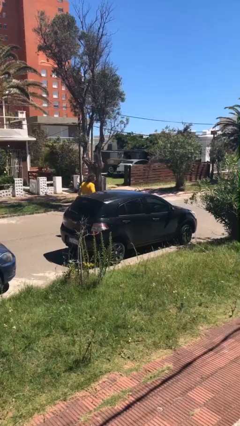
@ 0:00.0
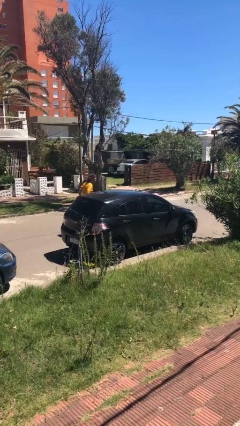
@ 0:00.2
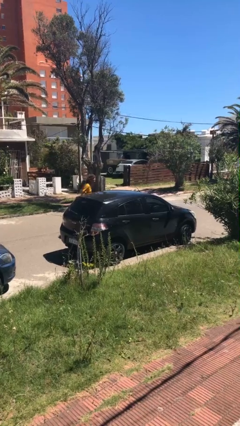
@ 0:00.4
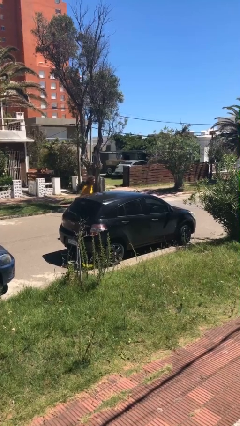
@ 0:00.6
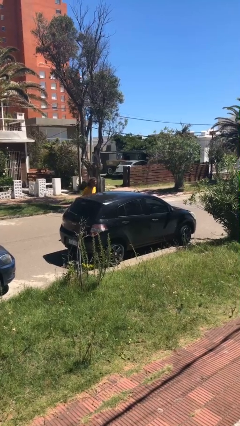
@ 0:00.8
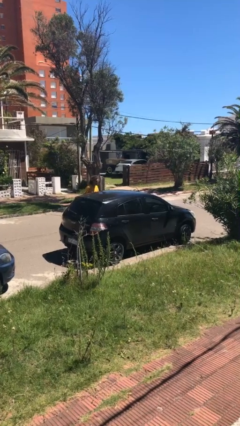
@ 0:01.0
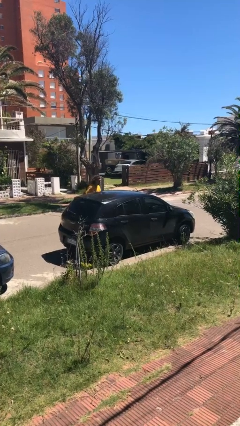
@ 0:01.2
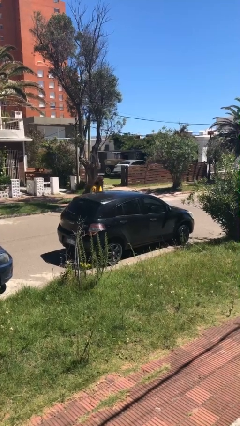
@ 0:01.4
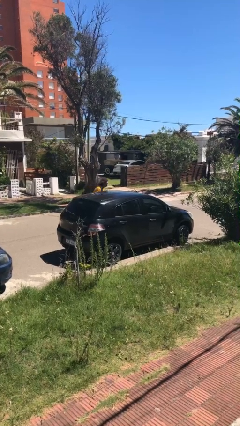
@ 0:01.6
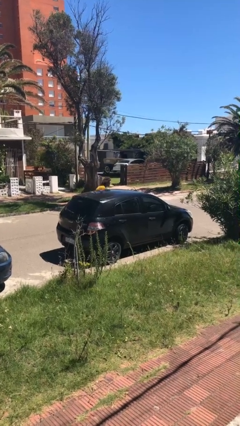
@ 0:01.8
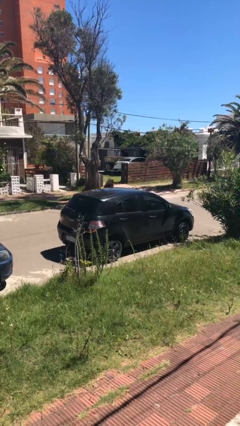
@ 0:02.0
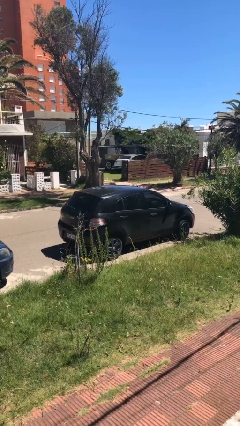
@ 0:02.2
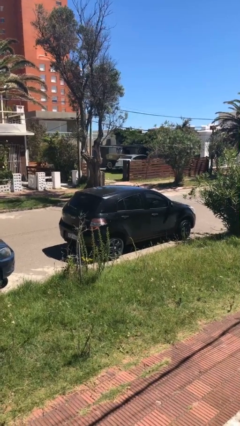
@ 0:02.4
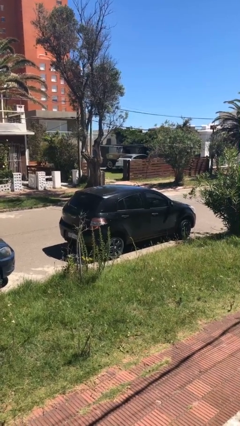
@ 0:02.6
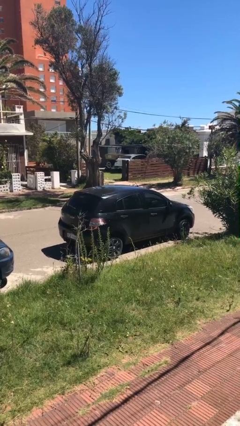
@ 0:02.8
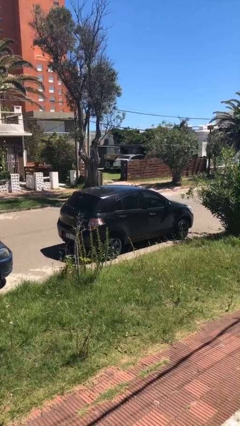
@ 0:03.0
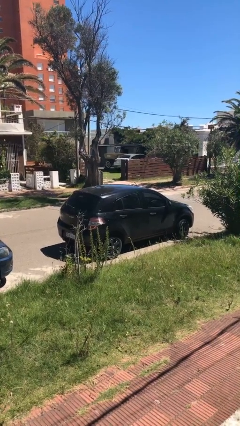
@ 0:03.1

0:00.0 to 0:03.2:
car picks up person

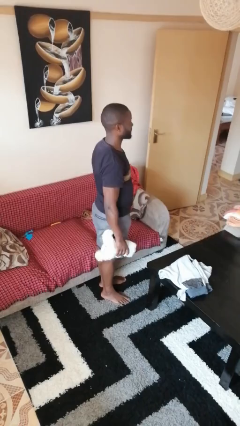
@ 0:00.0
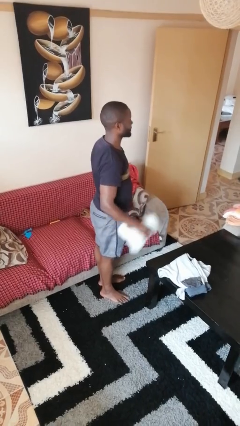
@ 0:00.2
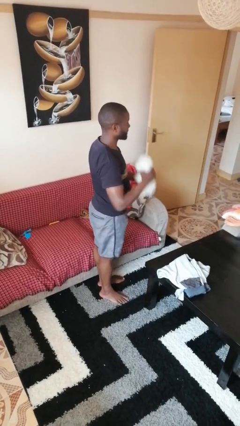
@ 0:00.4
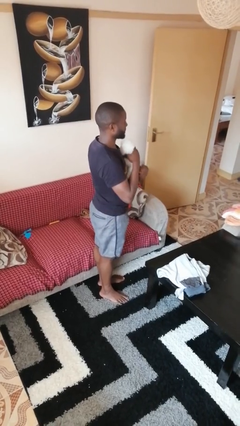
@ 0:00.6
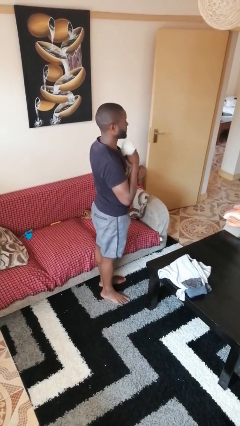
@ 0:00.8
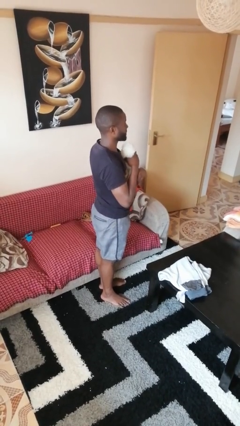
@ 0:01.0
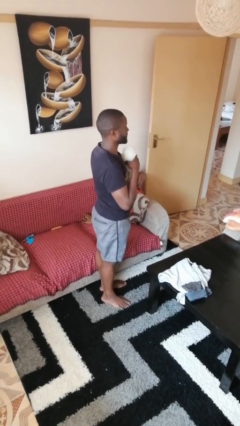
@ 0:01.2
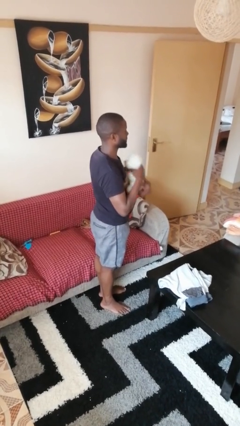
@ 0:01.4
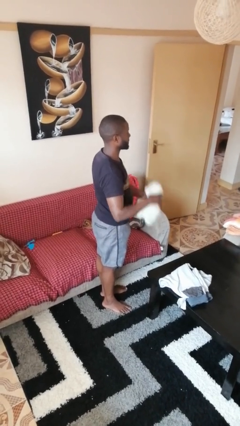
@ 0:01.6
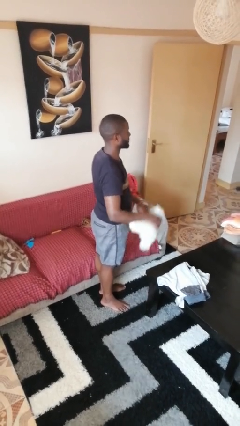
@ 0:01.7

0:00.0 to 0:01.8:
person hugs stuffed animal

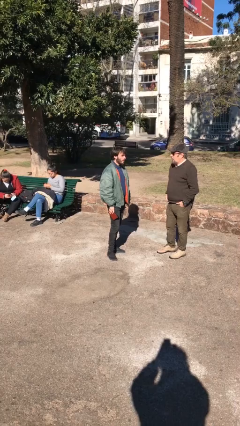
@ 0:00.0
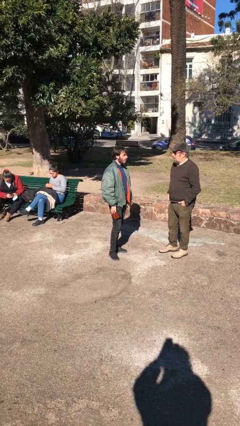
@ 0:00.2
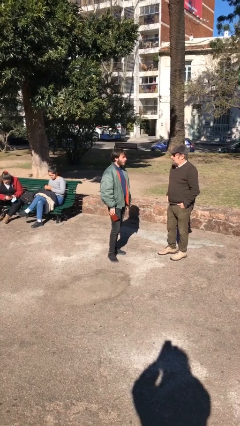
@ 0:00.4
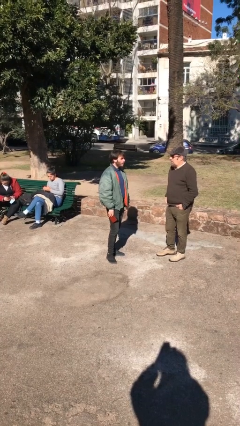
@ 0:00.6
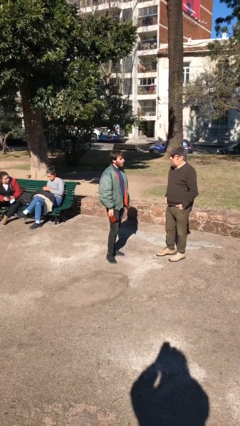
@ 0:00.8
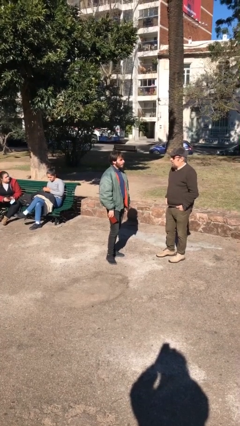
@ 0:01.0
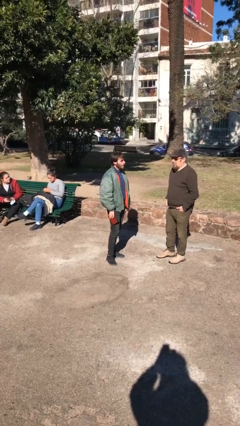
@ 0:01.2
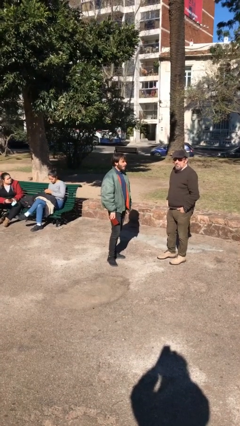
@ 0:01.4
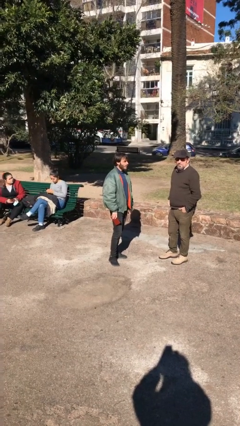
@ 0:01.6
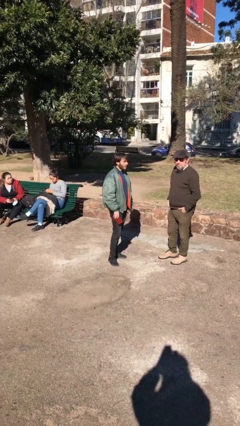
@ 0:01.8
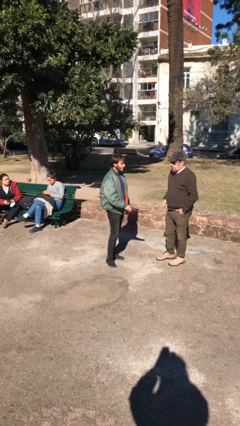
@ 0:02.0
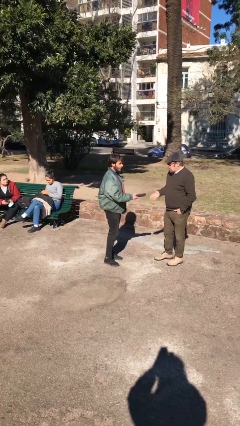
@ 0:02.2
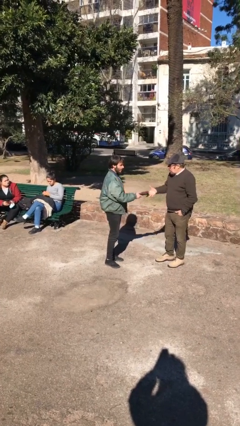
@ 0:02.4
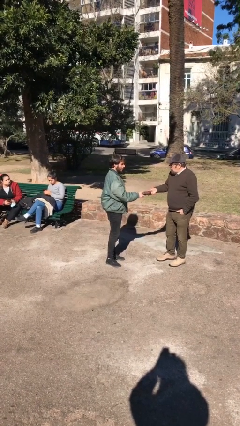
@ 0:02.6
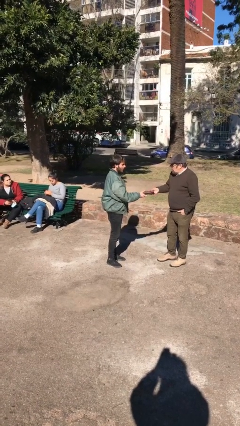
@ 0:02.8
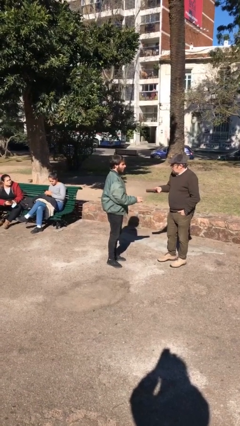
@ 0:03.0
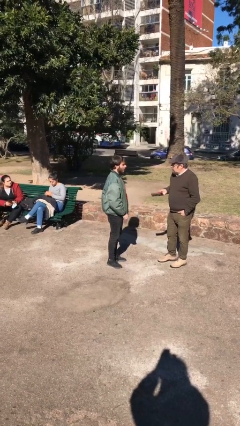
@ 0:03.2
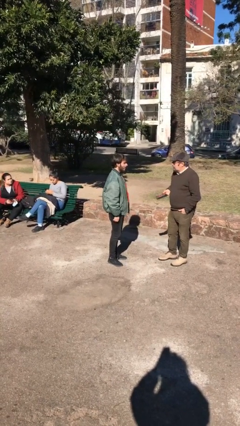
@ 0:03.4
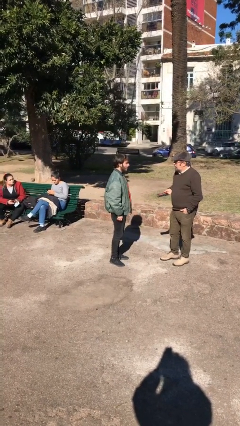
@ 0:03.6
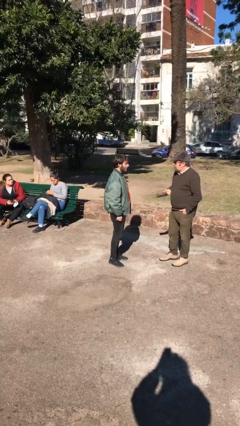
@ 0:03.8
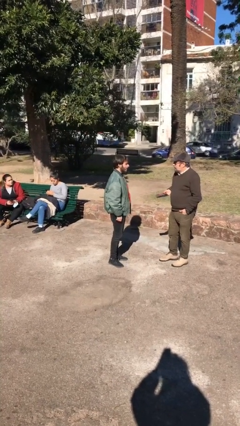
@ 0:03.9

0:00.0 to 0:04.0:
person transfers object to person

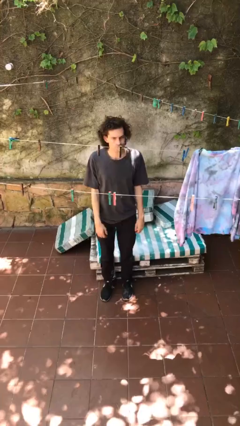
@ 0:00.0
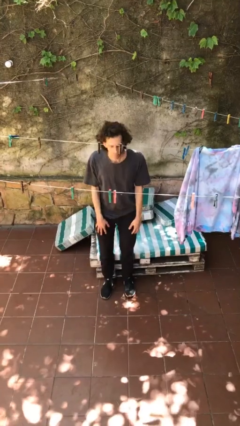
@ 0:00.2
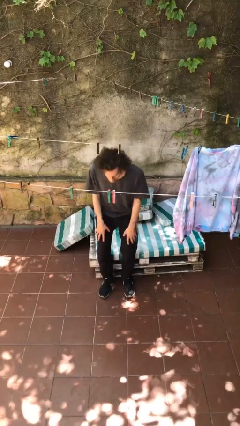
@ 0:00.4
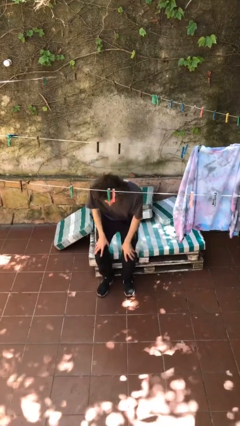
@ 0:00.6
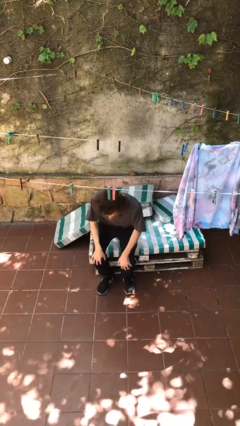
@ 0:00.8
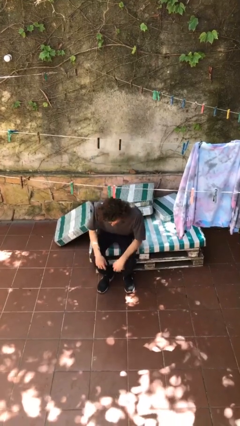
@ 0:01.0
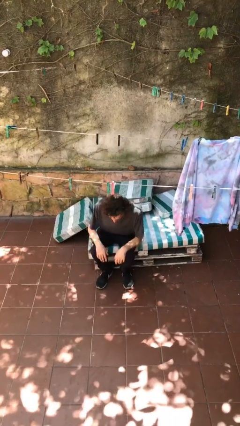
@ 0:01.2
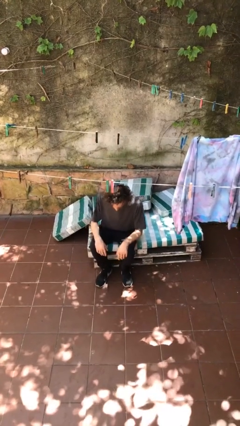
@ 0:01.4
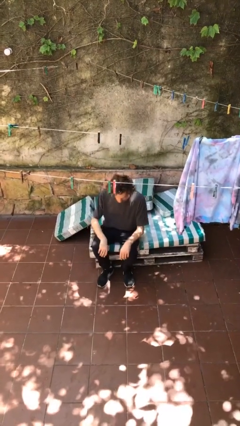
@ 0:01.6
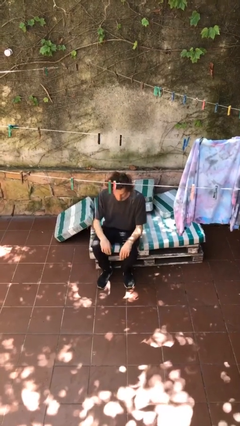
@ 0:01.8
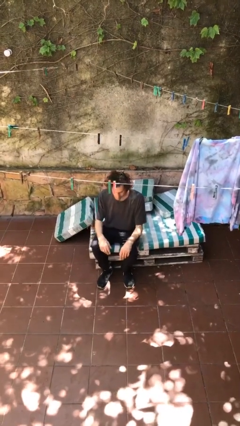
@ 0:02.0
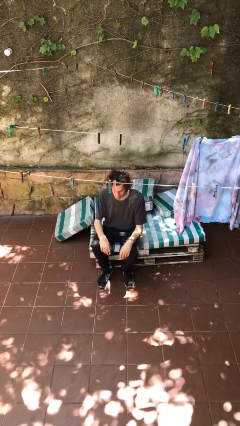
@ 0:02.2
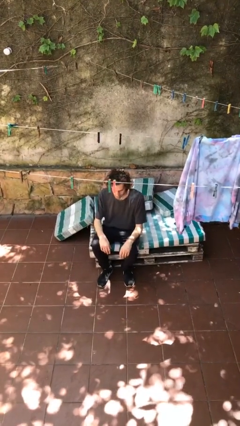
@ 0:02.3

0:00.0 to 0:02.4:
person sits down

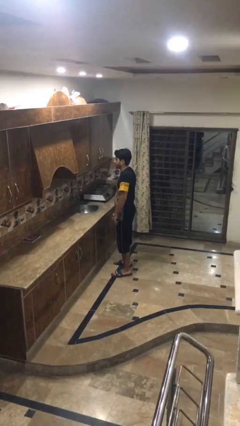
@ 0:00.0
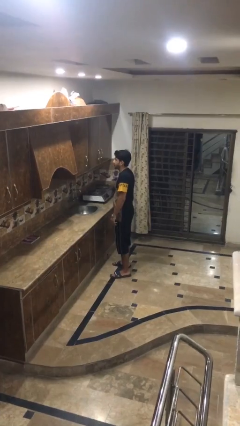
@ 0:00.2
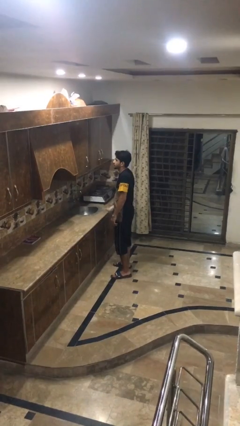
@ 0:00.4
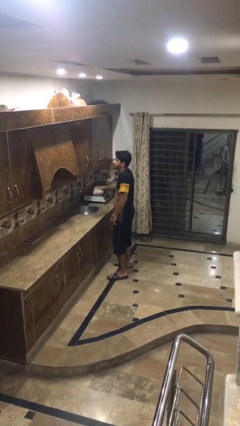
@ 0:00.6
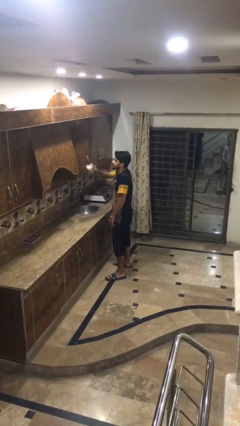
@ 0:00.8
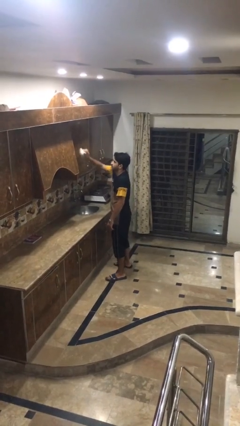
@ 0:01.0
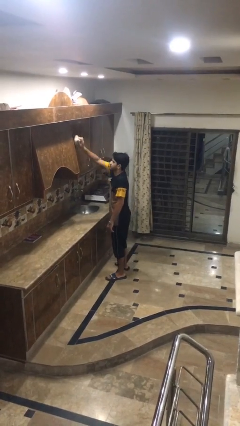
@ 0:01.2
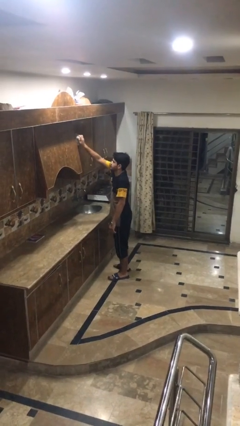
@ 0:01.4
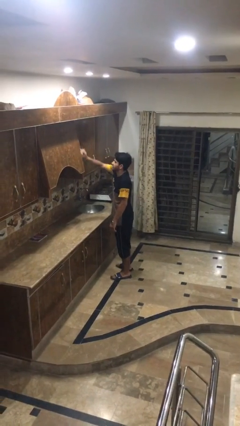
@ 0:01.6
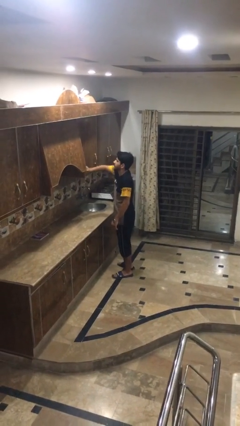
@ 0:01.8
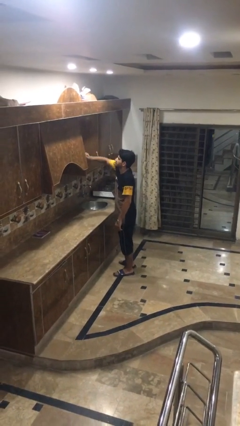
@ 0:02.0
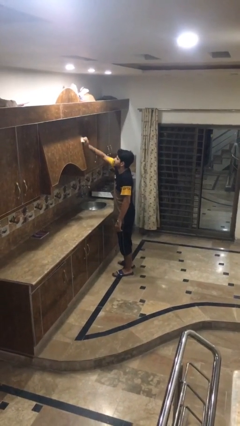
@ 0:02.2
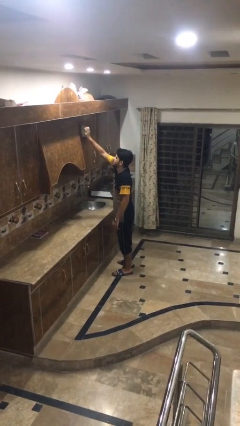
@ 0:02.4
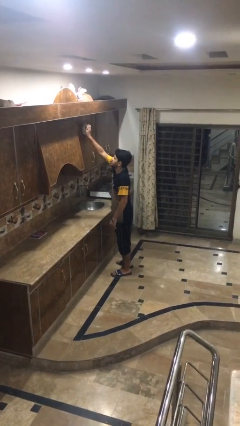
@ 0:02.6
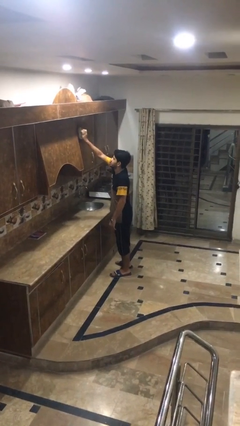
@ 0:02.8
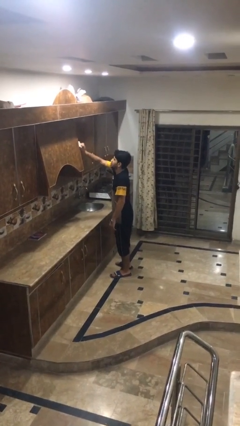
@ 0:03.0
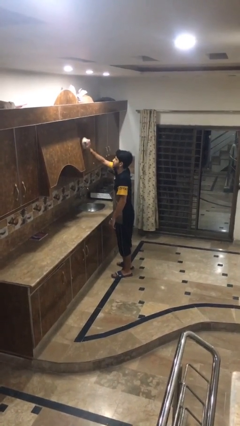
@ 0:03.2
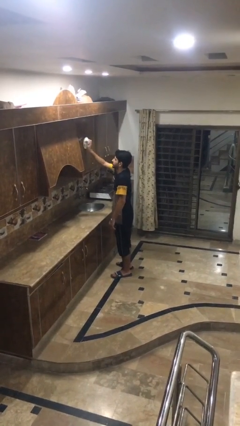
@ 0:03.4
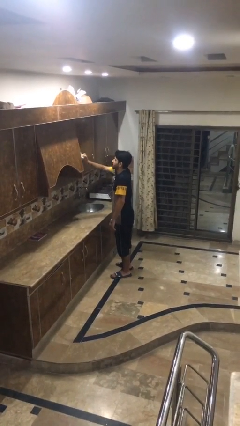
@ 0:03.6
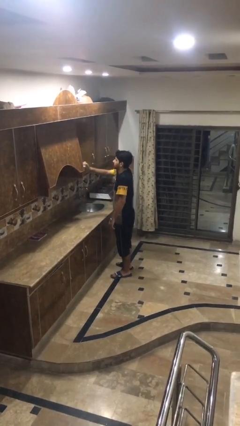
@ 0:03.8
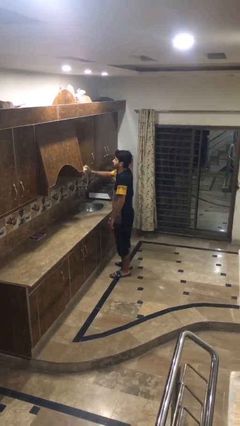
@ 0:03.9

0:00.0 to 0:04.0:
person dusts furniture

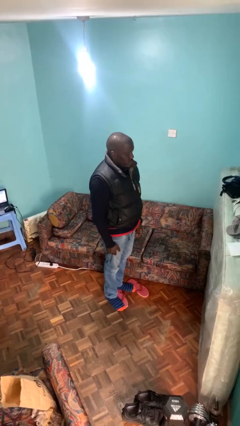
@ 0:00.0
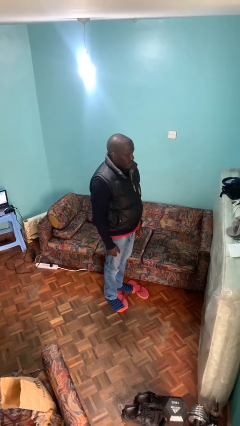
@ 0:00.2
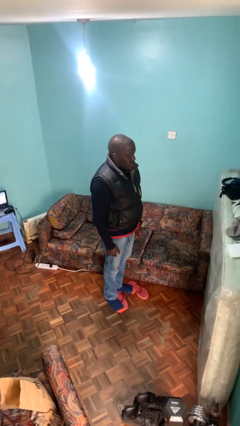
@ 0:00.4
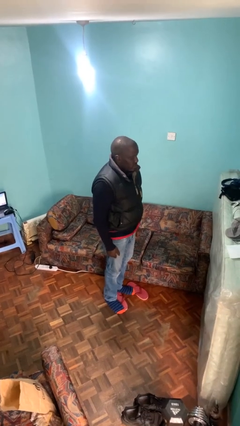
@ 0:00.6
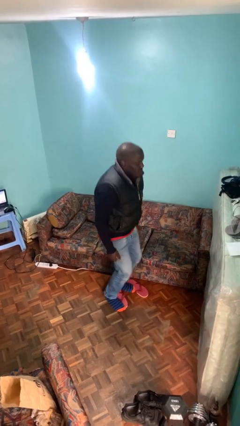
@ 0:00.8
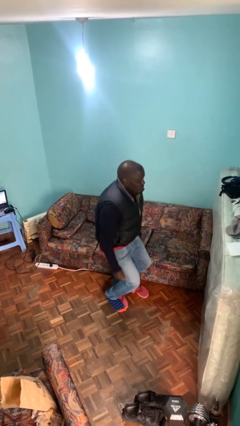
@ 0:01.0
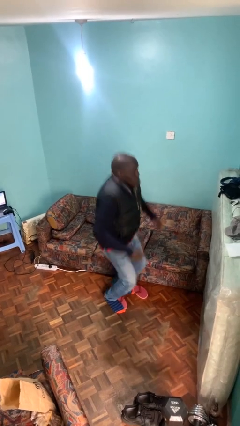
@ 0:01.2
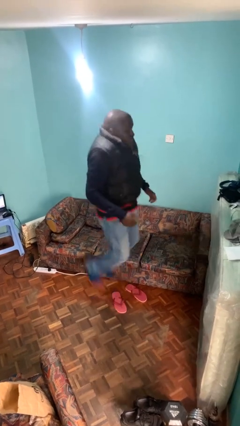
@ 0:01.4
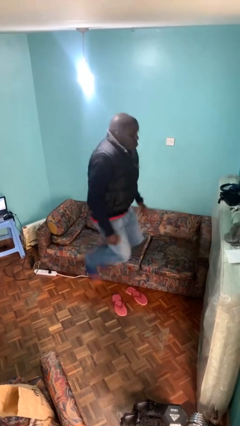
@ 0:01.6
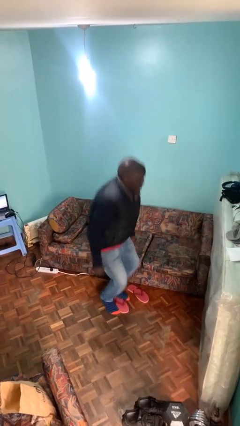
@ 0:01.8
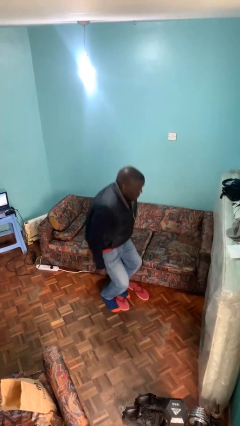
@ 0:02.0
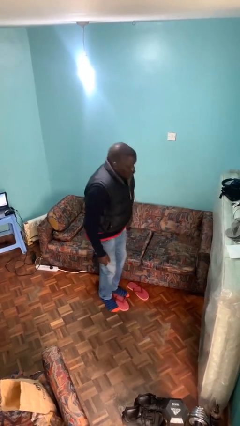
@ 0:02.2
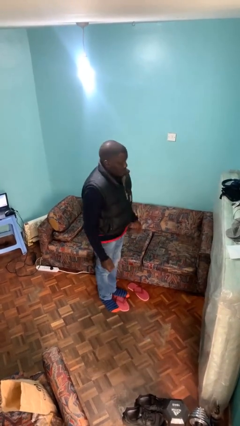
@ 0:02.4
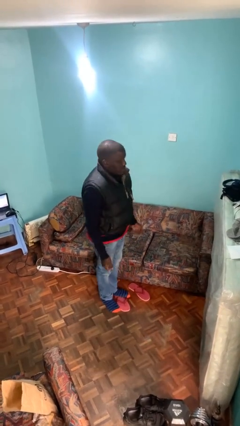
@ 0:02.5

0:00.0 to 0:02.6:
person jumps
